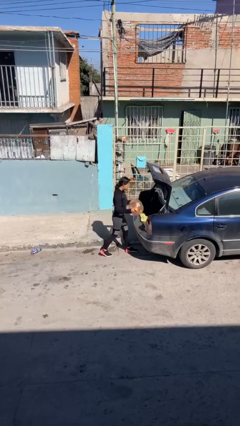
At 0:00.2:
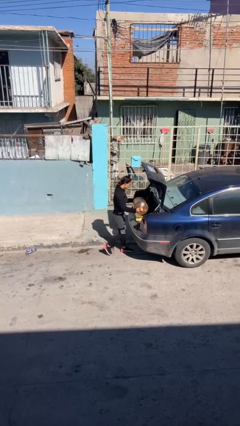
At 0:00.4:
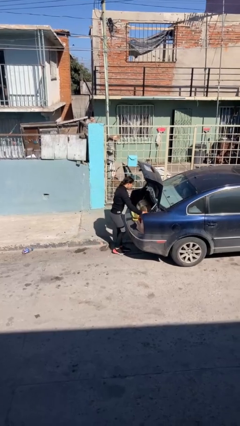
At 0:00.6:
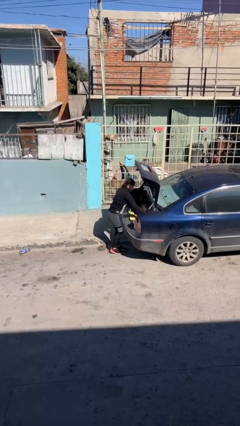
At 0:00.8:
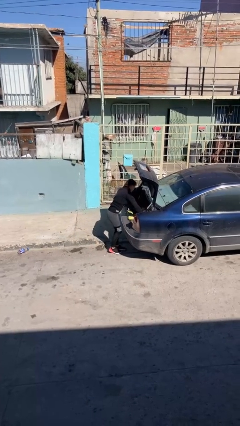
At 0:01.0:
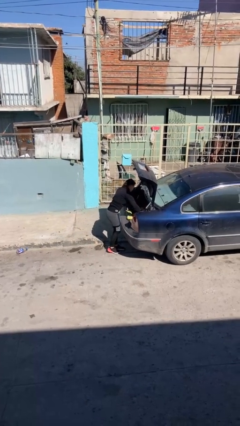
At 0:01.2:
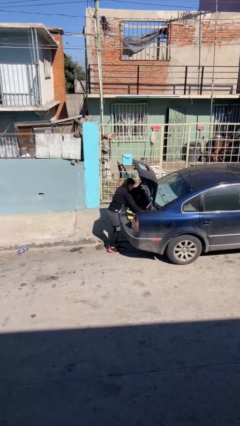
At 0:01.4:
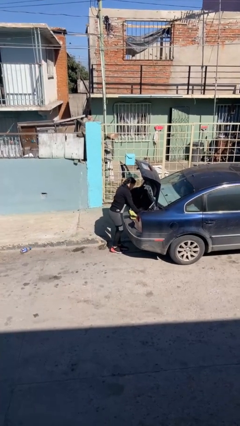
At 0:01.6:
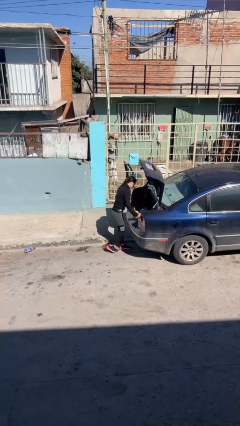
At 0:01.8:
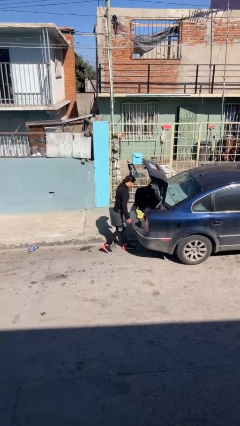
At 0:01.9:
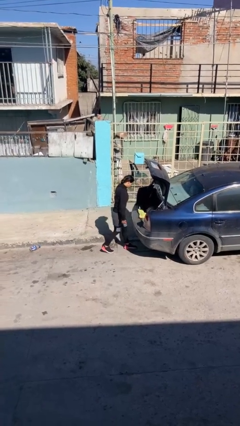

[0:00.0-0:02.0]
person loads car

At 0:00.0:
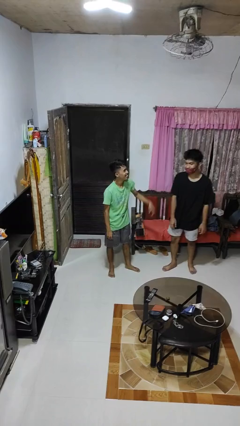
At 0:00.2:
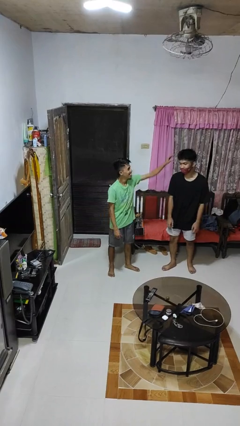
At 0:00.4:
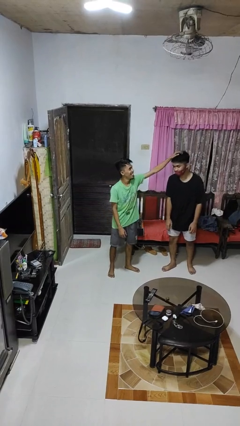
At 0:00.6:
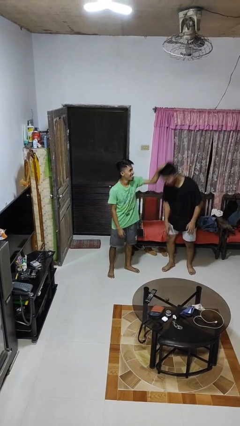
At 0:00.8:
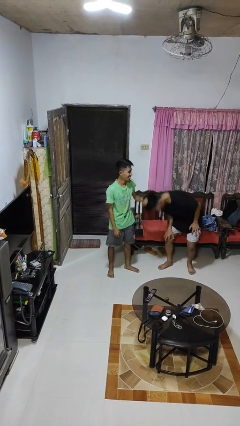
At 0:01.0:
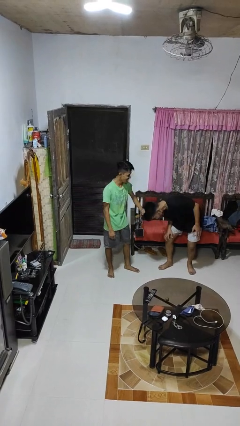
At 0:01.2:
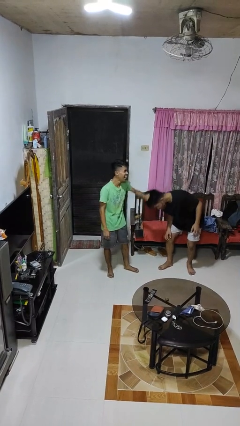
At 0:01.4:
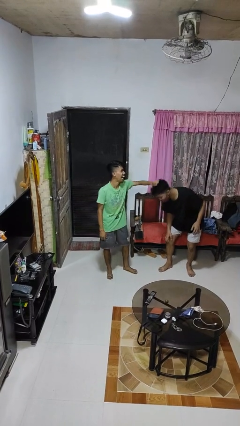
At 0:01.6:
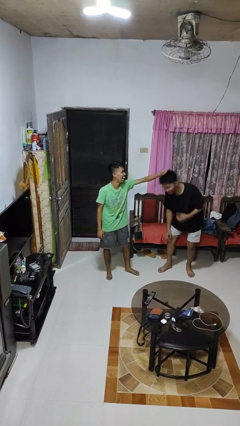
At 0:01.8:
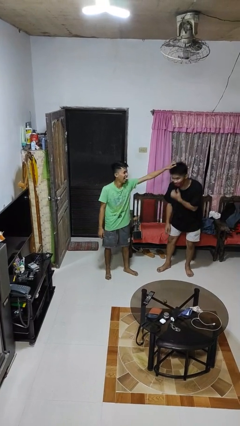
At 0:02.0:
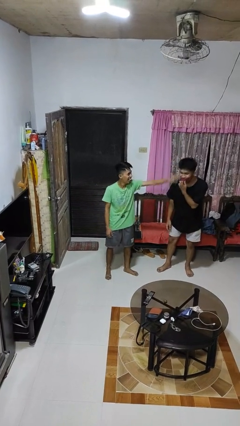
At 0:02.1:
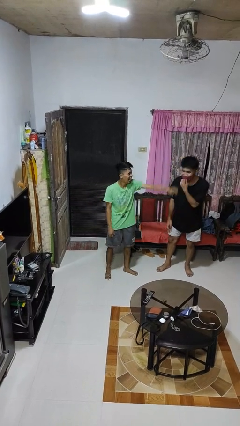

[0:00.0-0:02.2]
person grabs person by hair

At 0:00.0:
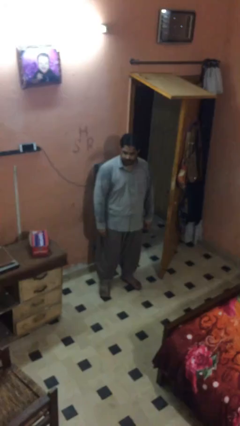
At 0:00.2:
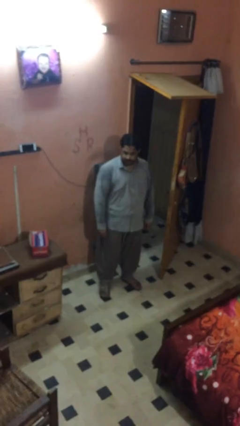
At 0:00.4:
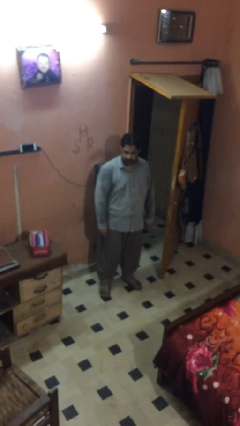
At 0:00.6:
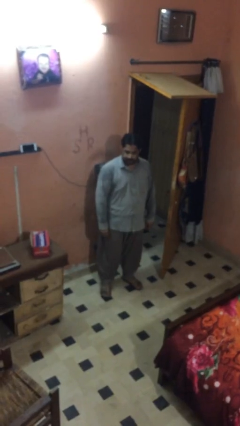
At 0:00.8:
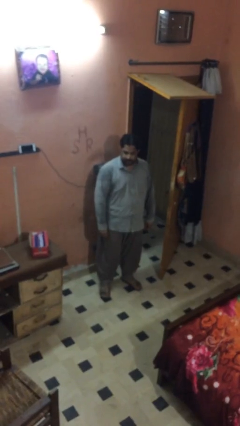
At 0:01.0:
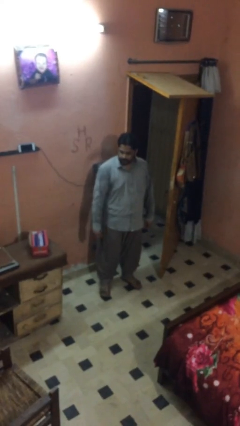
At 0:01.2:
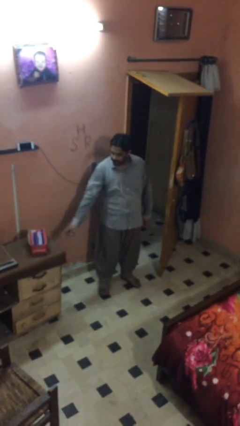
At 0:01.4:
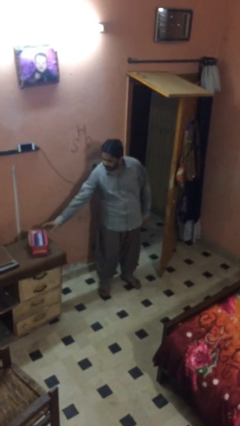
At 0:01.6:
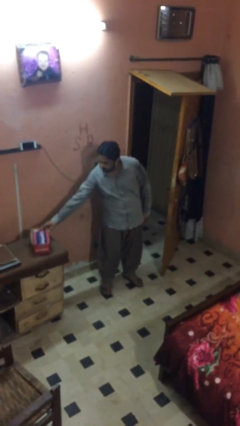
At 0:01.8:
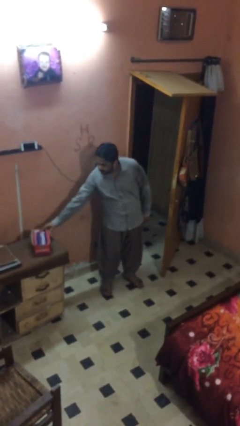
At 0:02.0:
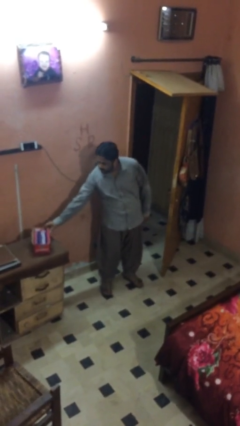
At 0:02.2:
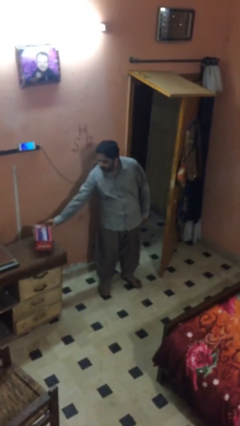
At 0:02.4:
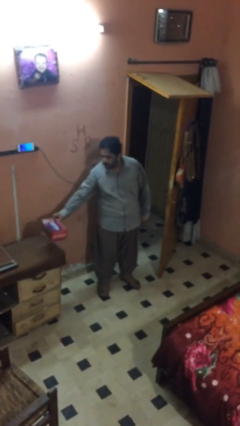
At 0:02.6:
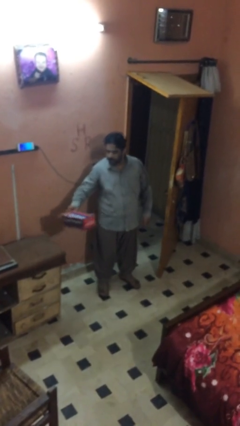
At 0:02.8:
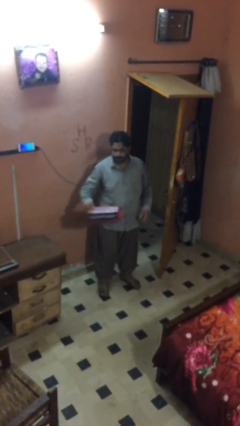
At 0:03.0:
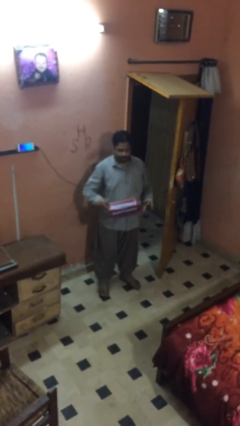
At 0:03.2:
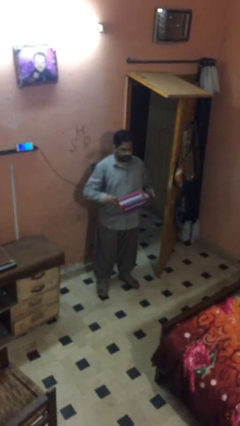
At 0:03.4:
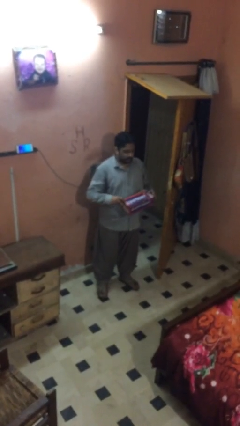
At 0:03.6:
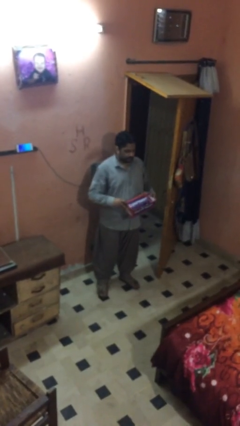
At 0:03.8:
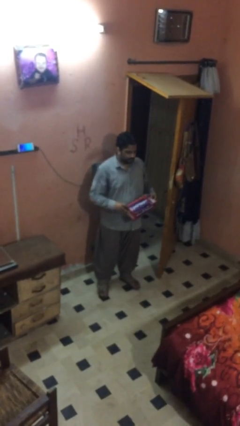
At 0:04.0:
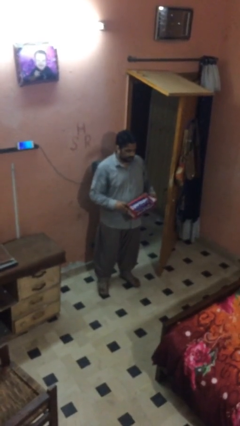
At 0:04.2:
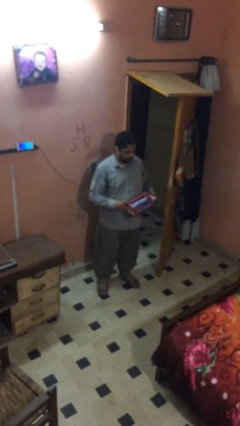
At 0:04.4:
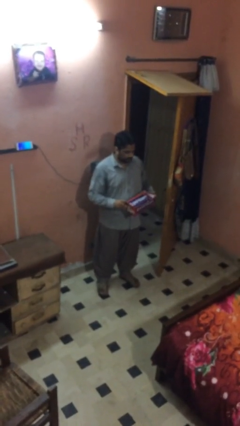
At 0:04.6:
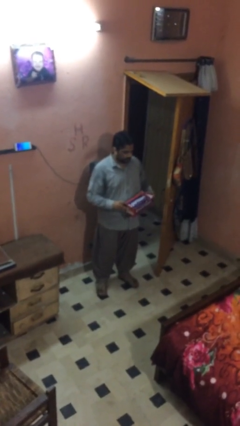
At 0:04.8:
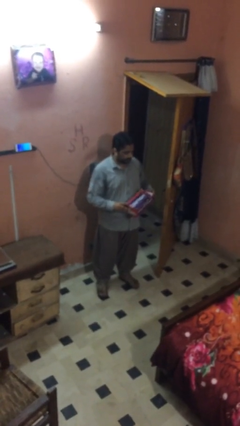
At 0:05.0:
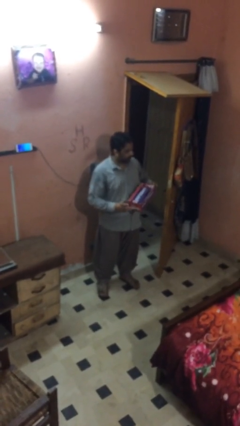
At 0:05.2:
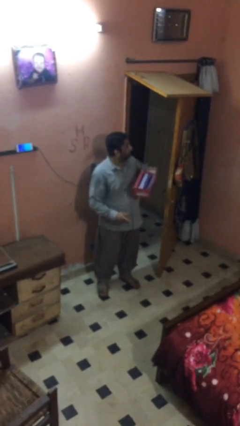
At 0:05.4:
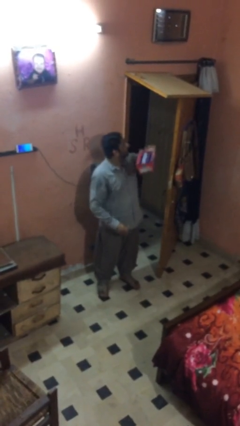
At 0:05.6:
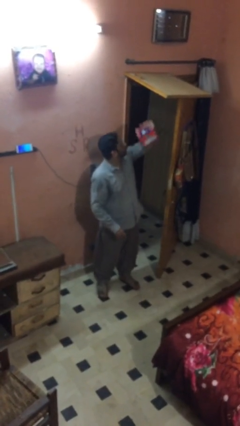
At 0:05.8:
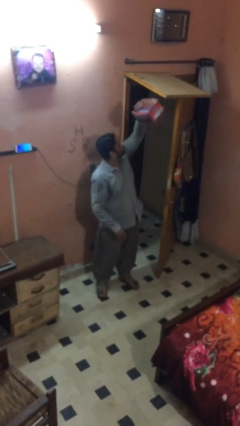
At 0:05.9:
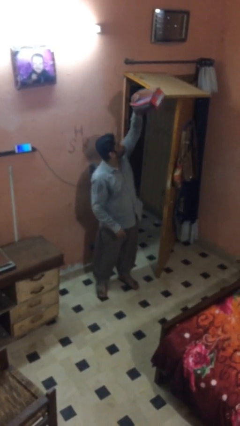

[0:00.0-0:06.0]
person picks up object from table

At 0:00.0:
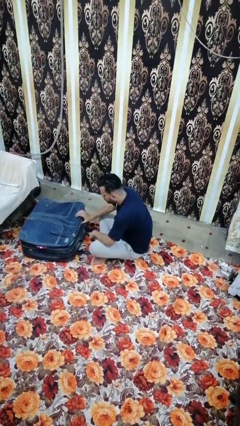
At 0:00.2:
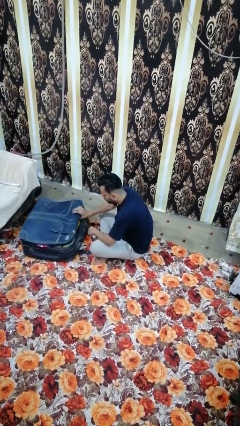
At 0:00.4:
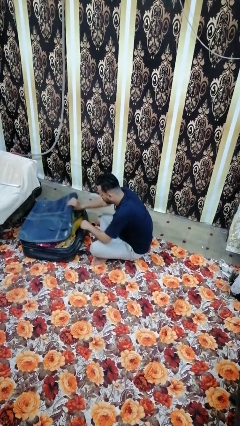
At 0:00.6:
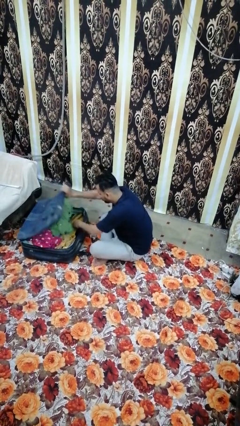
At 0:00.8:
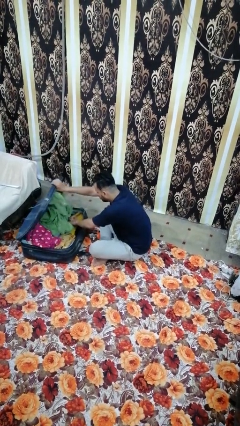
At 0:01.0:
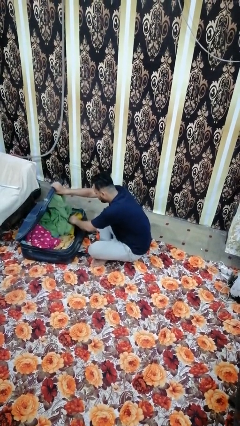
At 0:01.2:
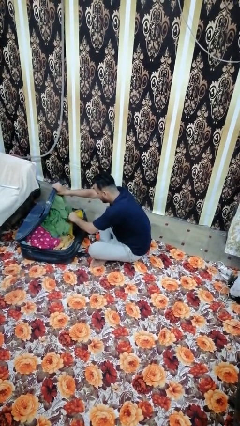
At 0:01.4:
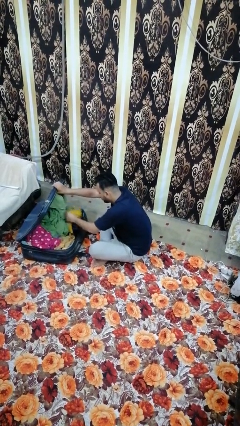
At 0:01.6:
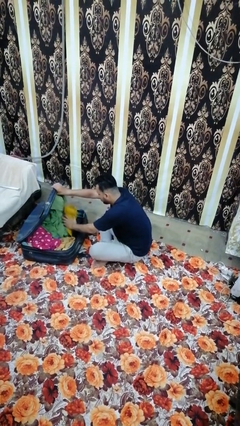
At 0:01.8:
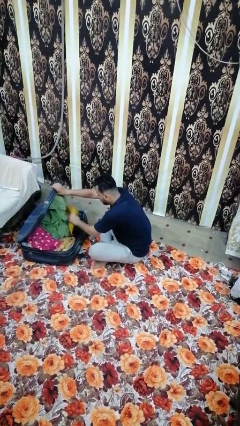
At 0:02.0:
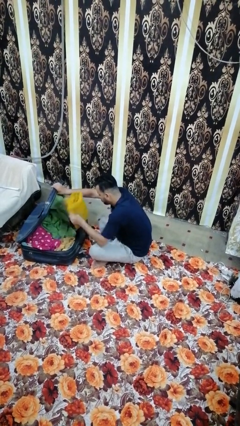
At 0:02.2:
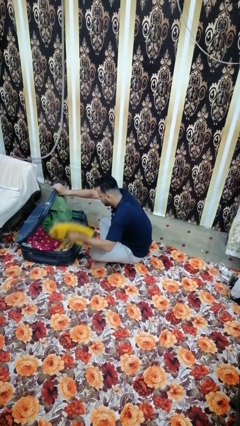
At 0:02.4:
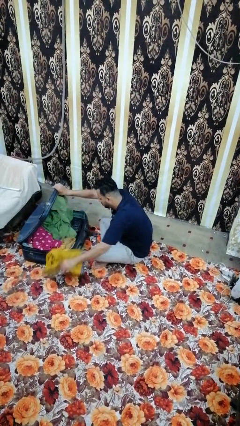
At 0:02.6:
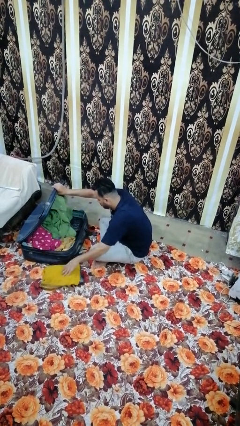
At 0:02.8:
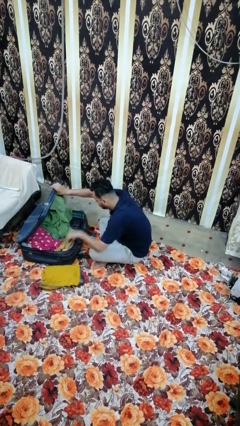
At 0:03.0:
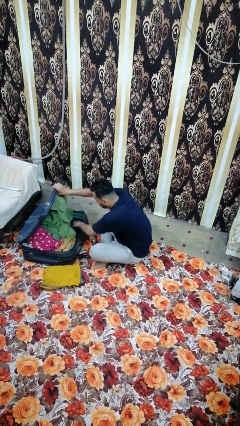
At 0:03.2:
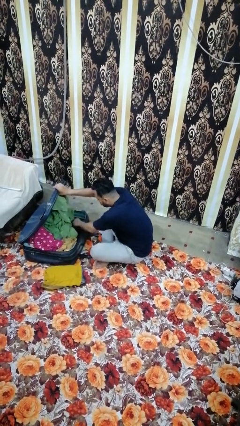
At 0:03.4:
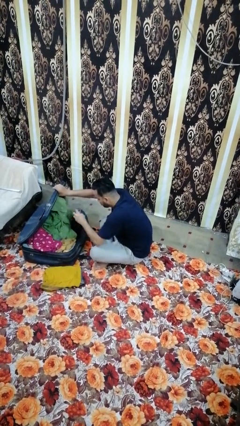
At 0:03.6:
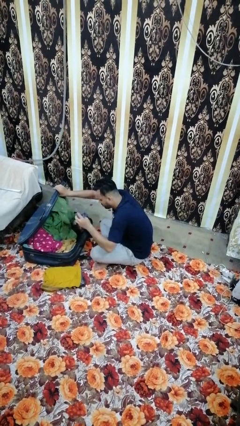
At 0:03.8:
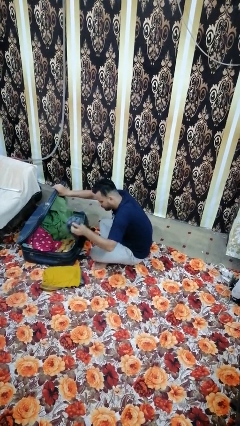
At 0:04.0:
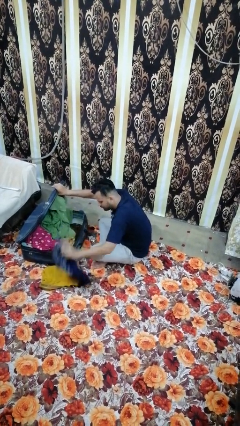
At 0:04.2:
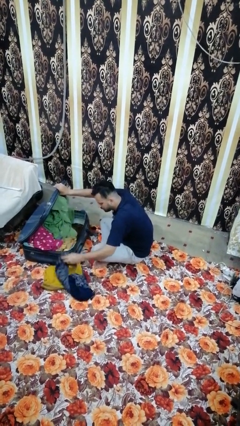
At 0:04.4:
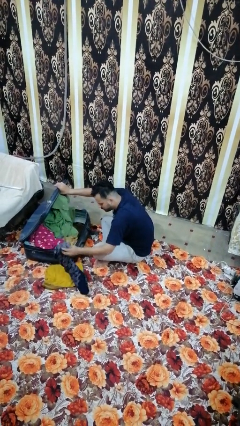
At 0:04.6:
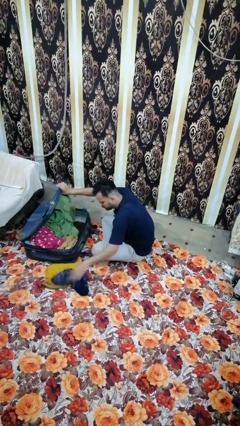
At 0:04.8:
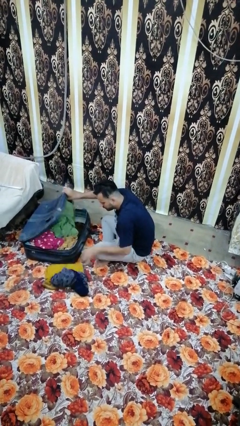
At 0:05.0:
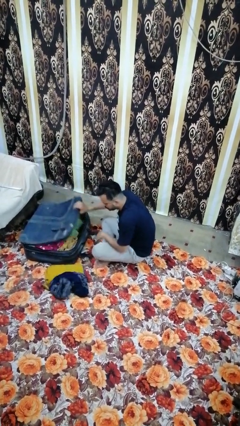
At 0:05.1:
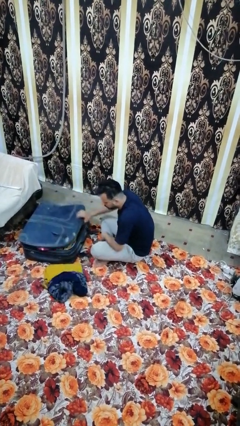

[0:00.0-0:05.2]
person unloads clothes from suitcase

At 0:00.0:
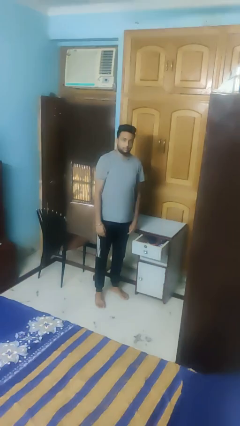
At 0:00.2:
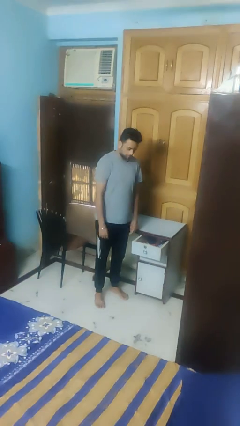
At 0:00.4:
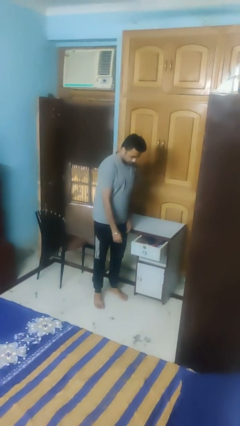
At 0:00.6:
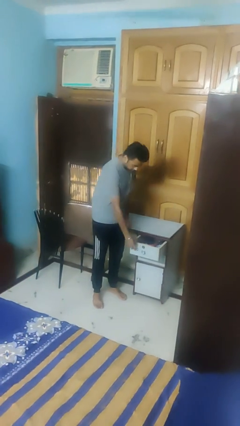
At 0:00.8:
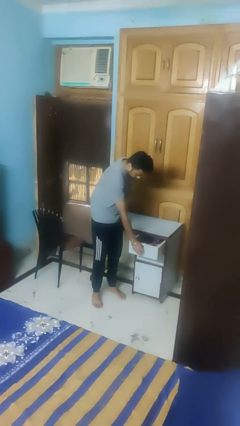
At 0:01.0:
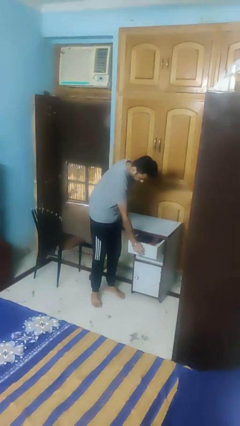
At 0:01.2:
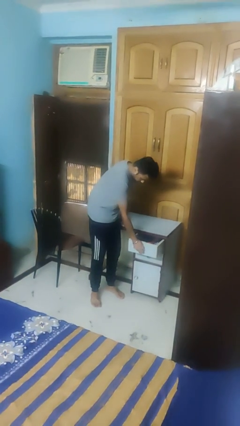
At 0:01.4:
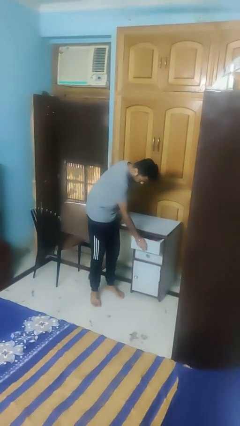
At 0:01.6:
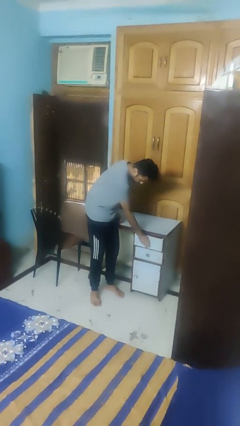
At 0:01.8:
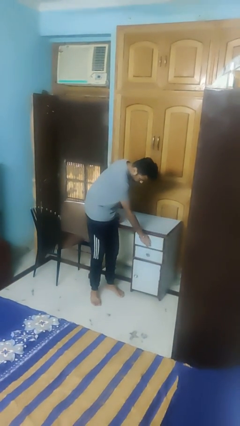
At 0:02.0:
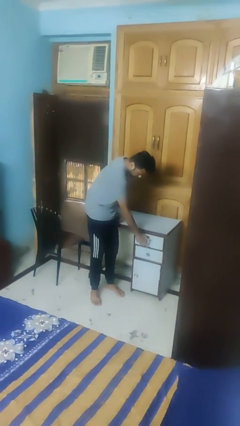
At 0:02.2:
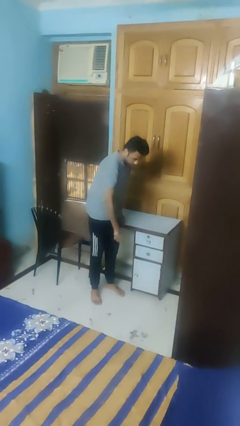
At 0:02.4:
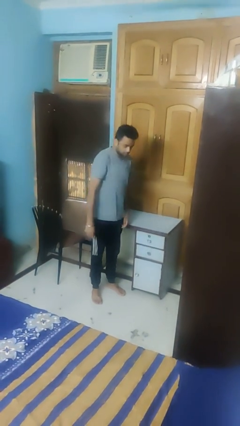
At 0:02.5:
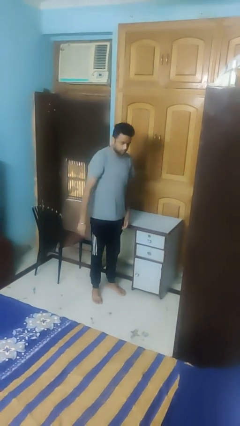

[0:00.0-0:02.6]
person closes dresser drawer
